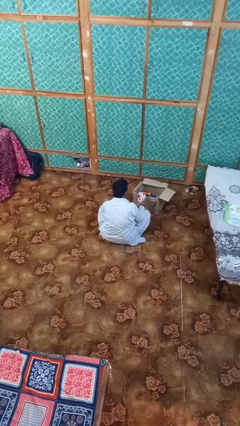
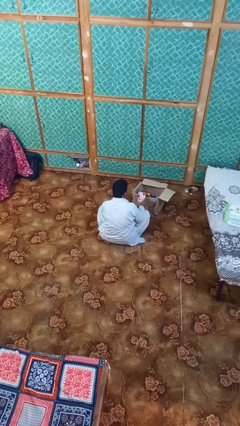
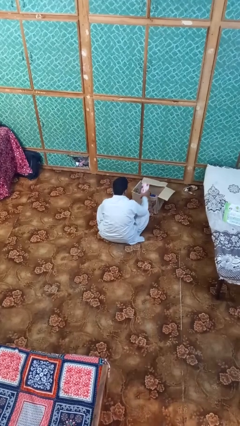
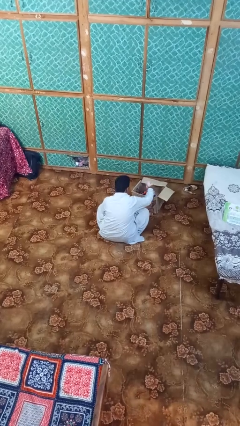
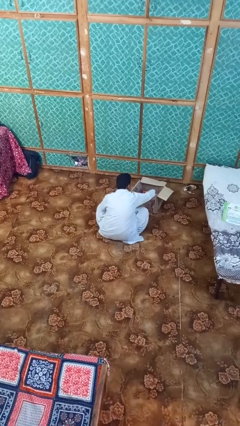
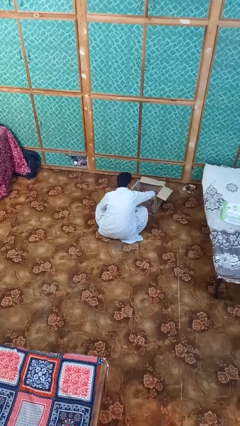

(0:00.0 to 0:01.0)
person puts object into box

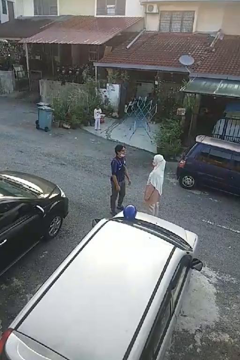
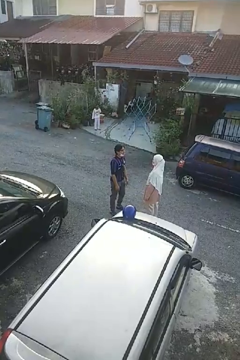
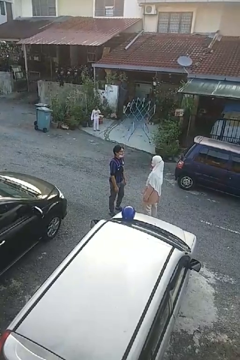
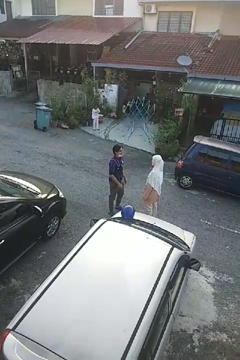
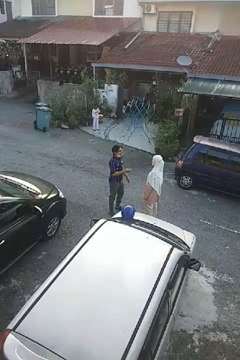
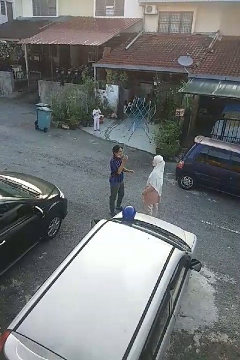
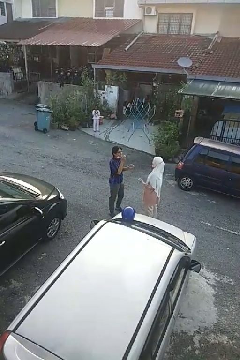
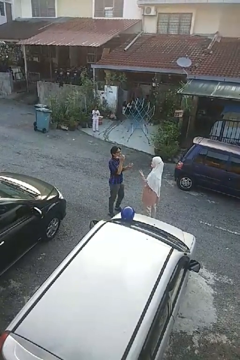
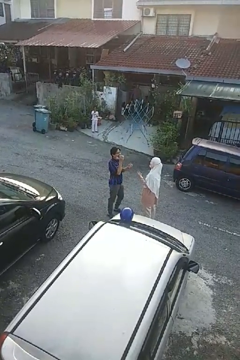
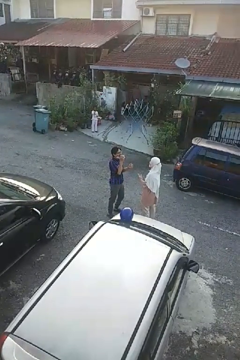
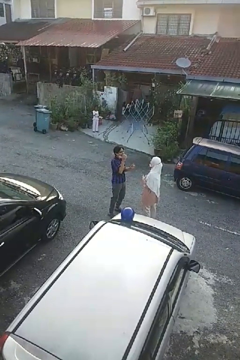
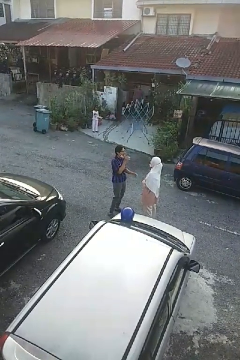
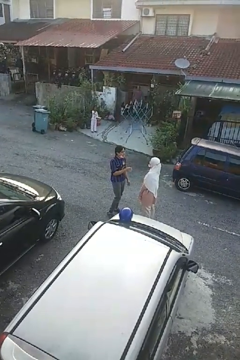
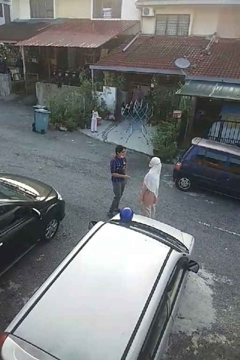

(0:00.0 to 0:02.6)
person laughs with person

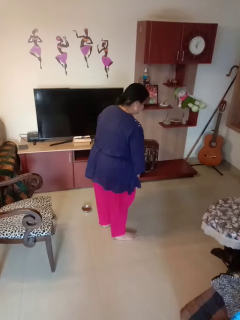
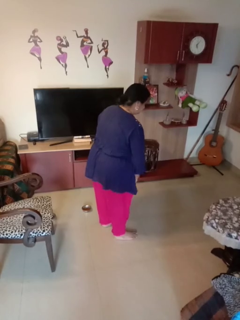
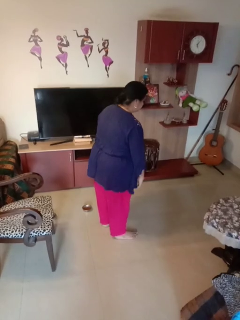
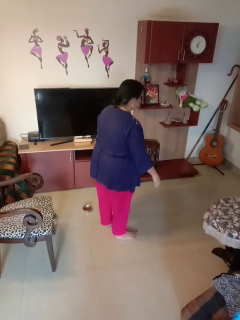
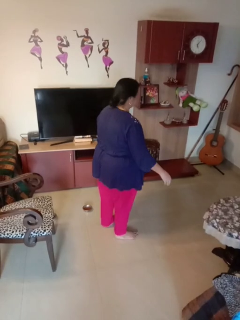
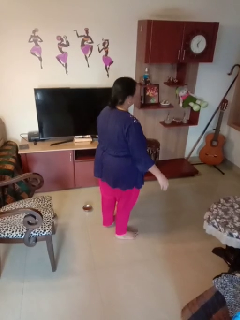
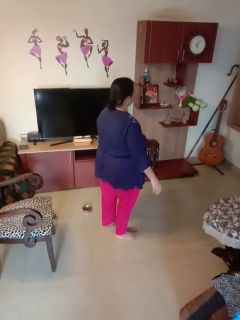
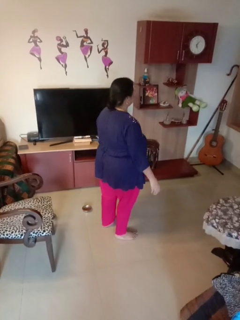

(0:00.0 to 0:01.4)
person slaps hands on thighs

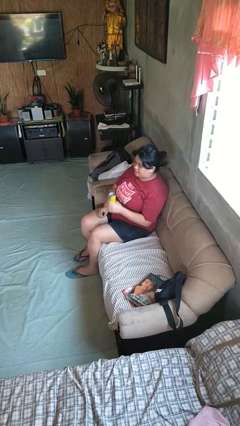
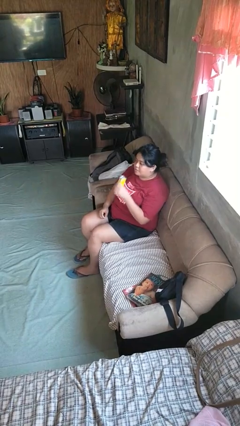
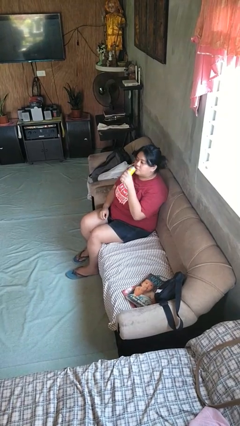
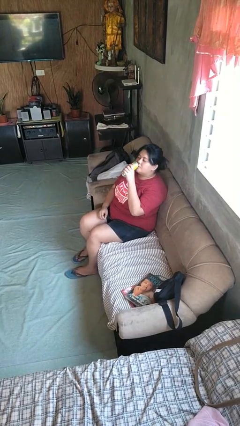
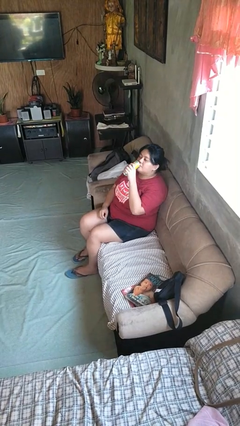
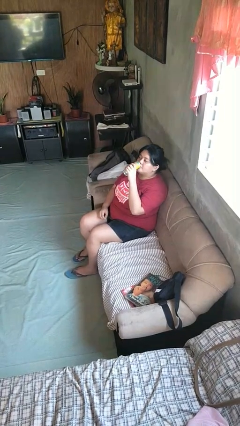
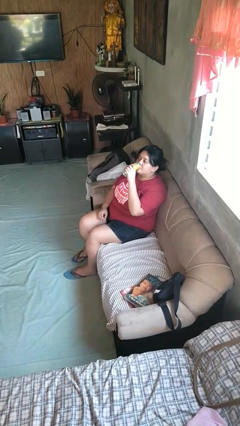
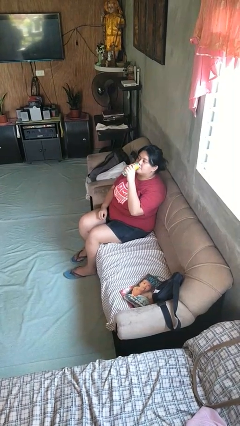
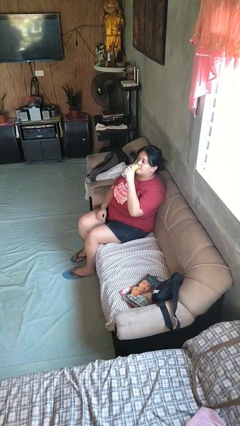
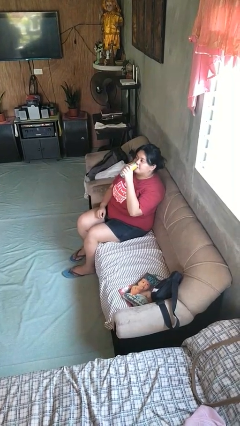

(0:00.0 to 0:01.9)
person drinks from beverage can

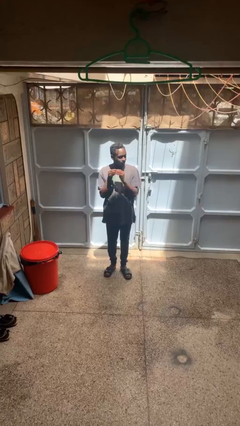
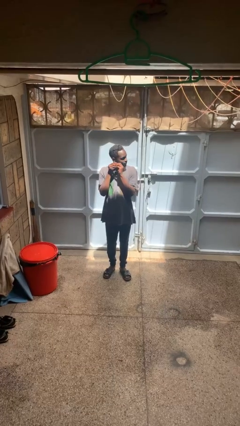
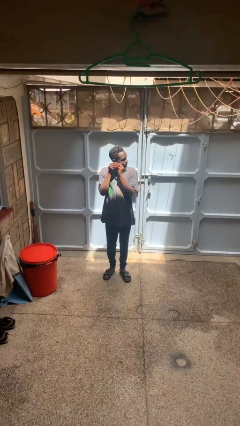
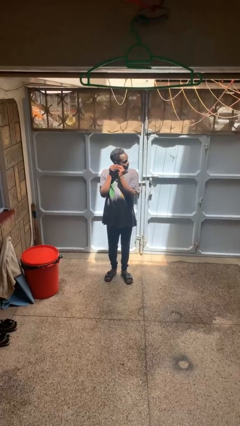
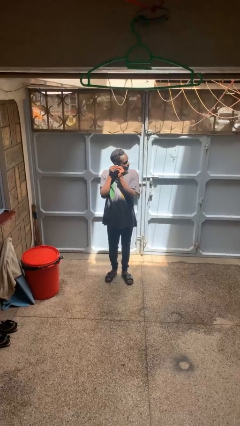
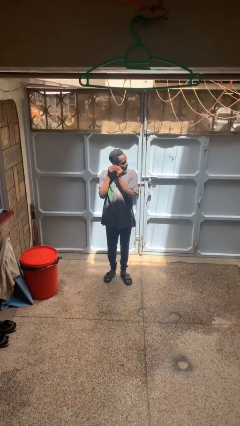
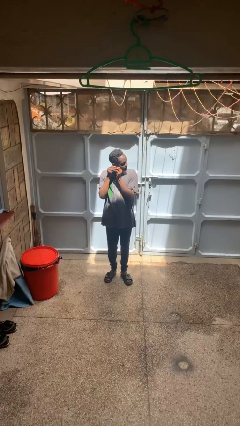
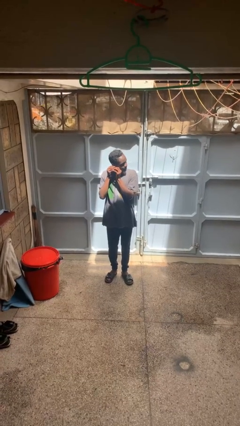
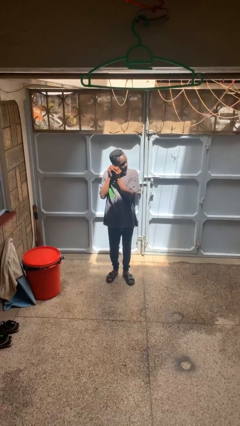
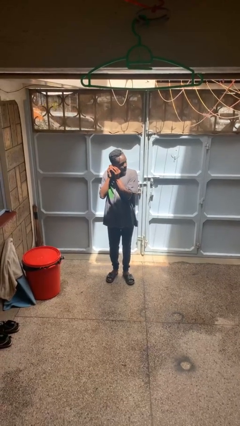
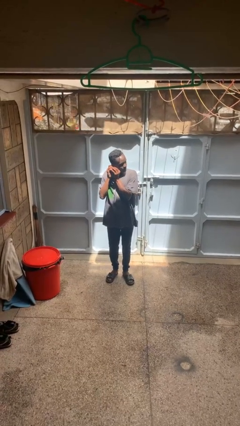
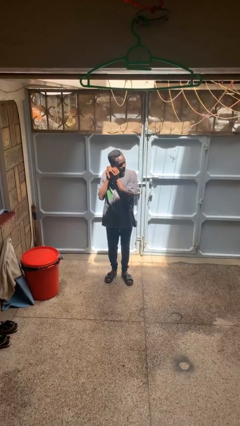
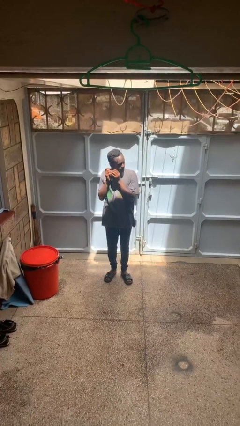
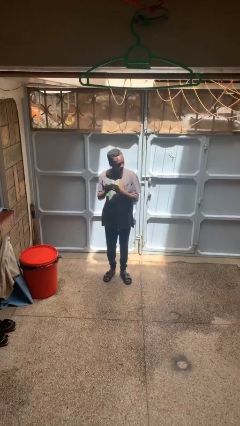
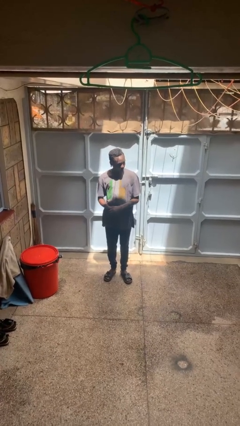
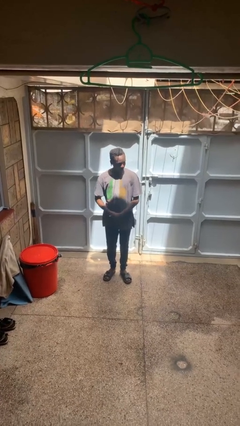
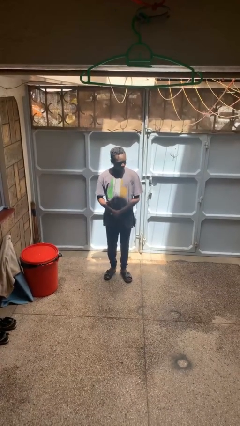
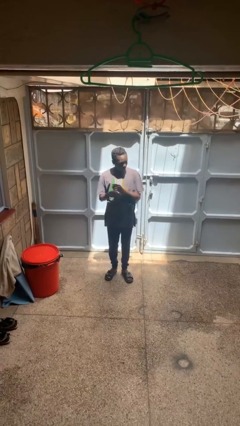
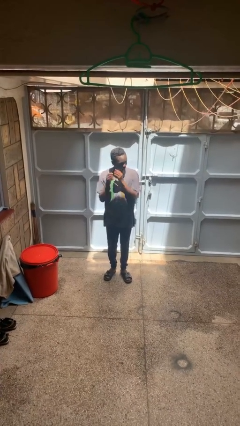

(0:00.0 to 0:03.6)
person puts on earrings

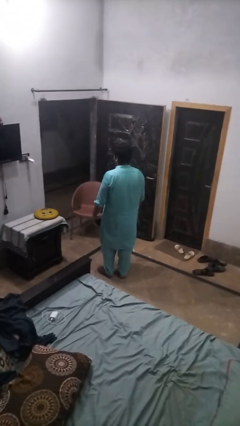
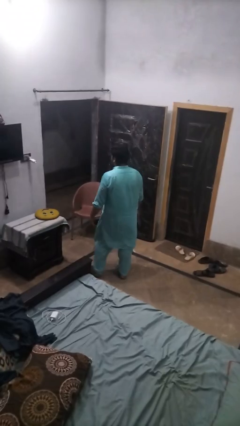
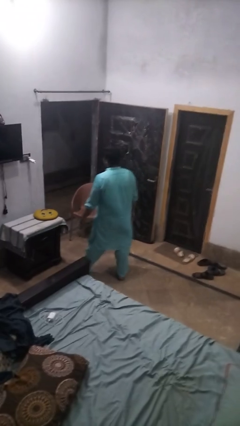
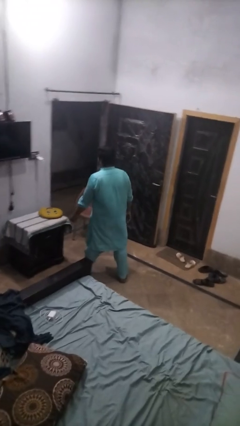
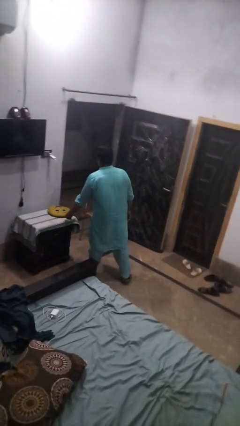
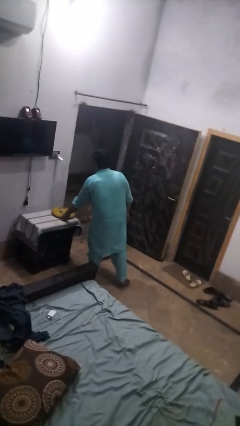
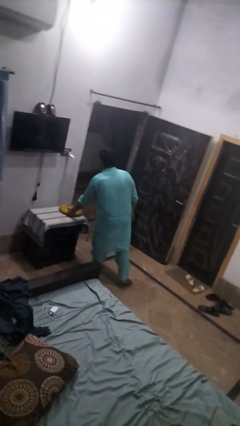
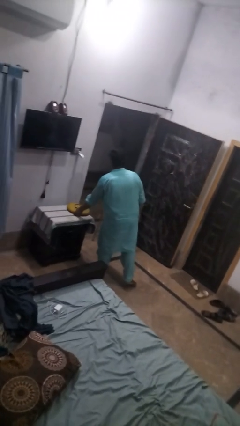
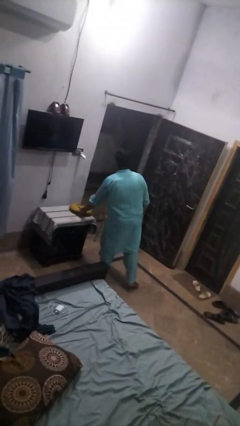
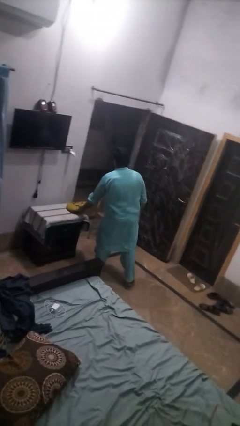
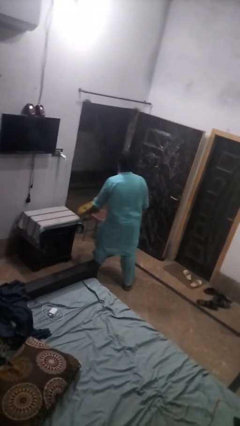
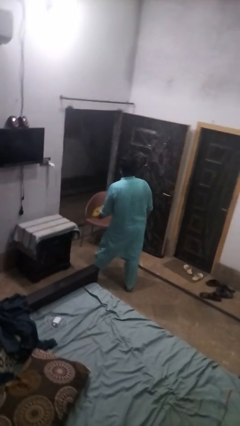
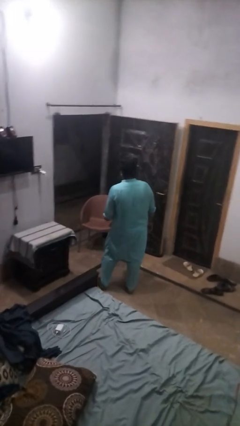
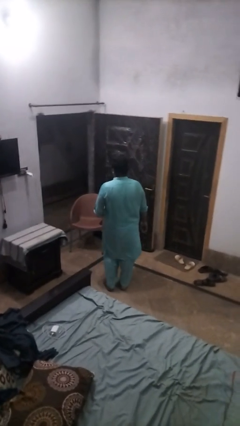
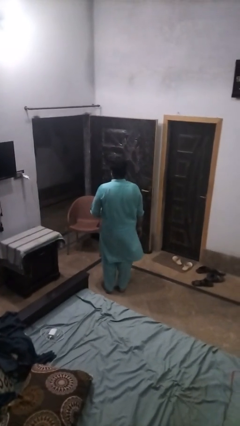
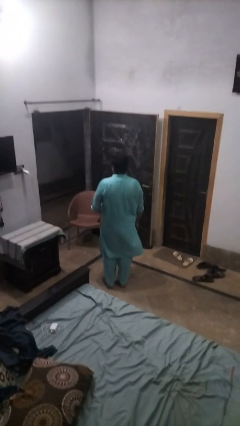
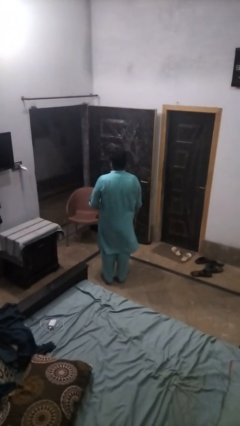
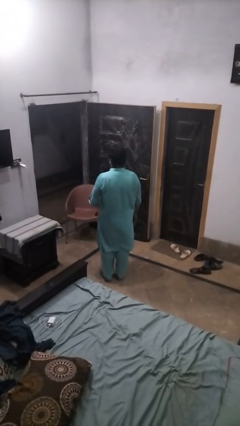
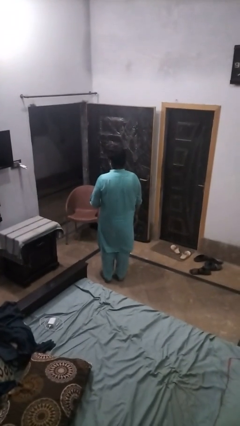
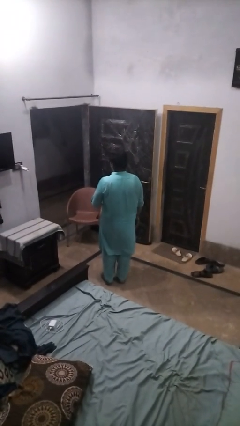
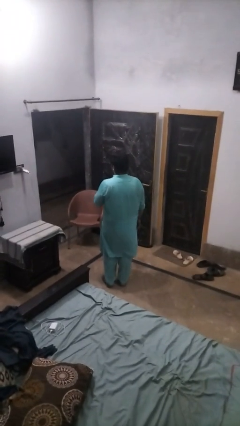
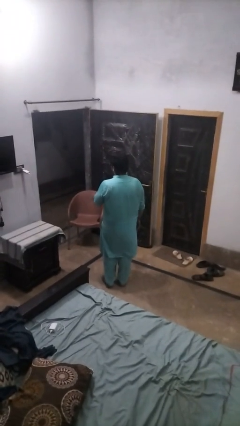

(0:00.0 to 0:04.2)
person picks up object from table

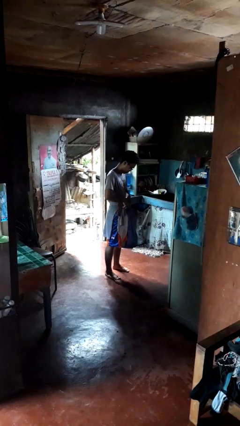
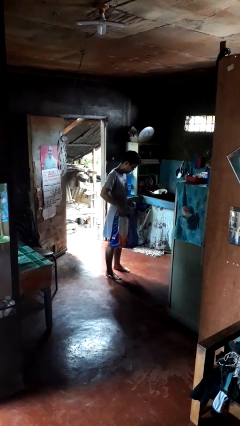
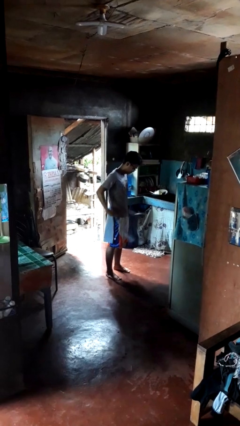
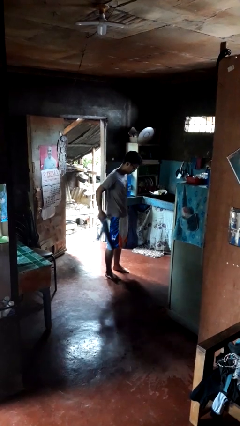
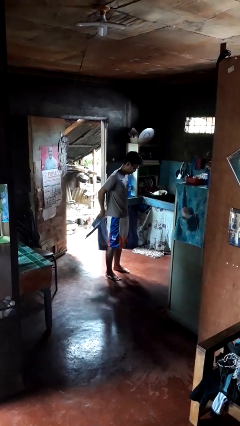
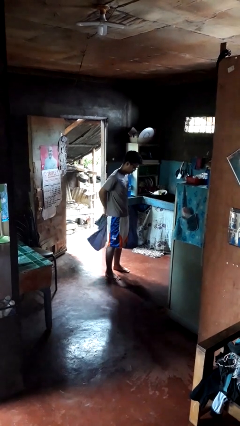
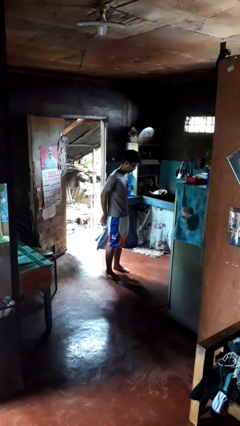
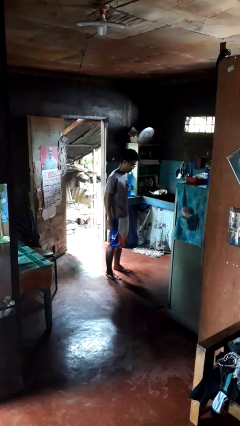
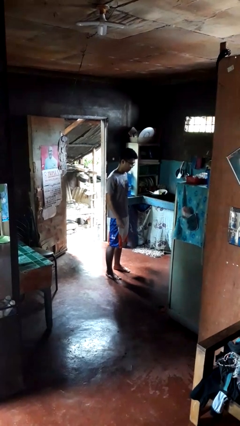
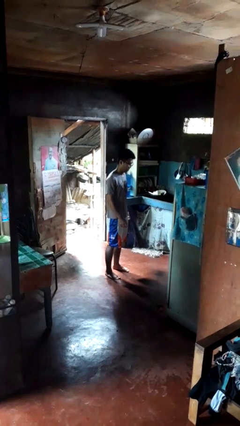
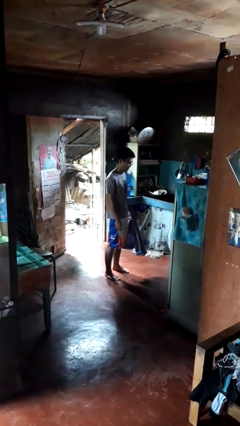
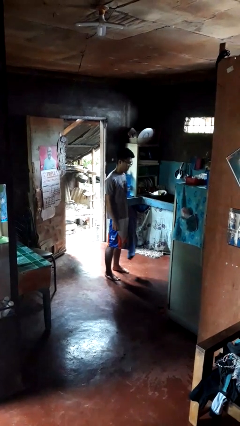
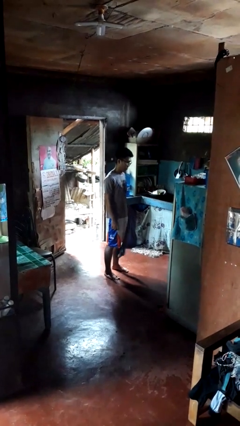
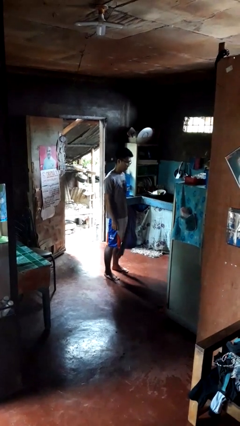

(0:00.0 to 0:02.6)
person unties jacket around waist

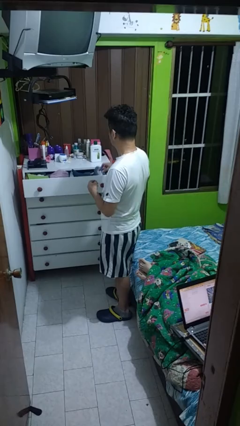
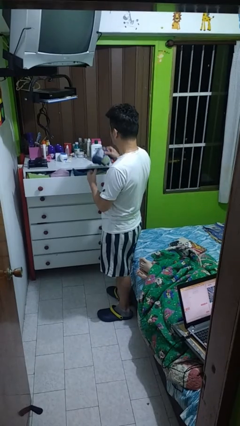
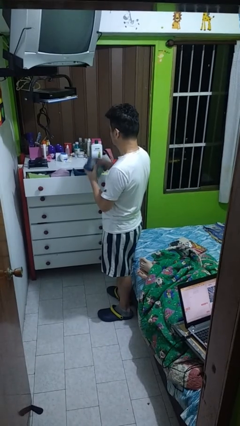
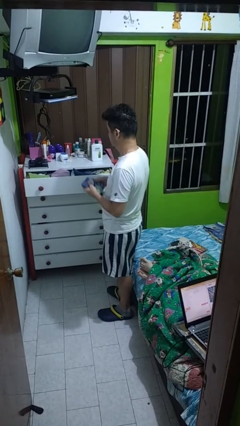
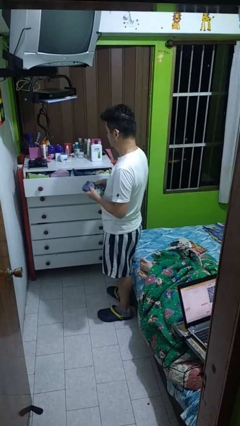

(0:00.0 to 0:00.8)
person takes clothes from dresser
